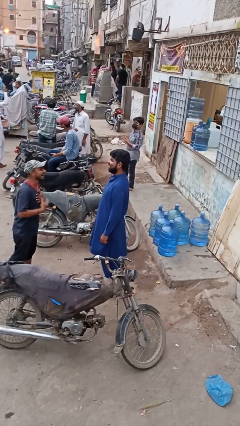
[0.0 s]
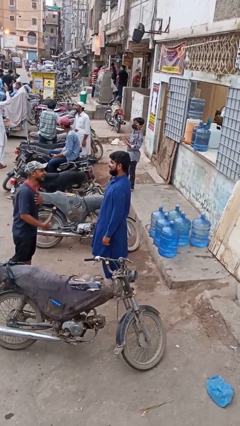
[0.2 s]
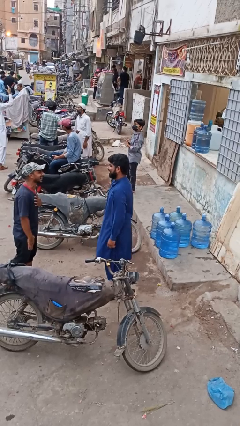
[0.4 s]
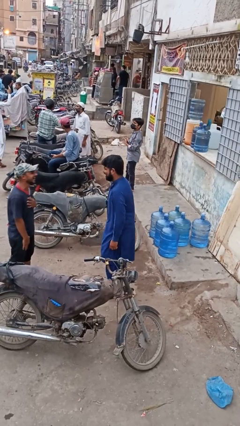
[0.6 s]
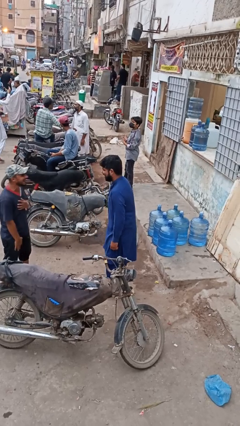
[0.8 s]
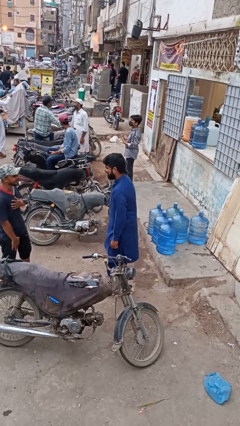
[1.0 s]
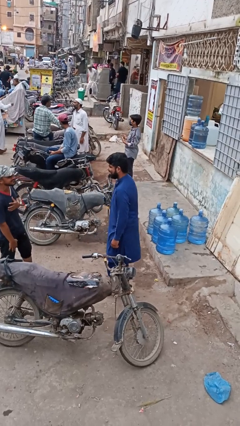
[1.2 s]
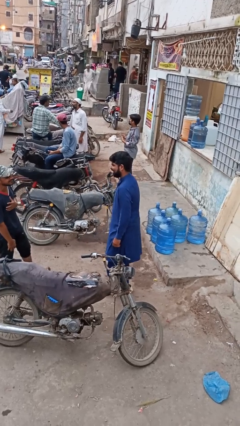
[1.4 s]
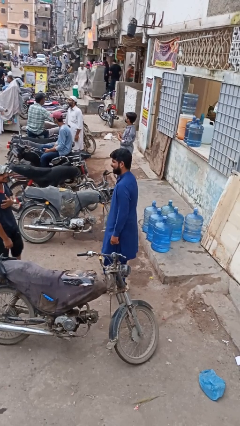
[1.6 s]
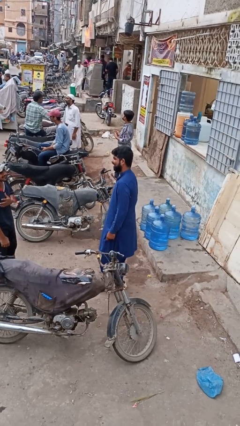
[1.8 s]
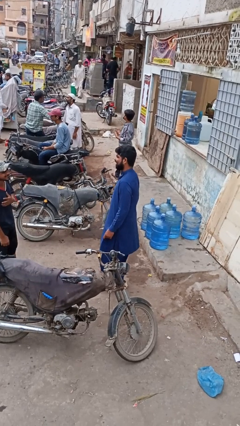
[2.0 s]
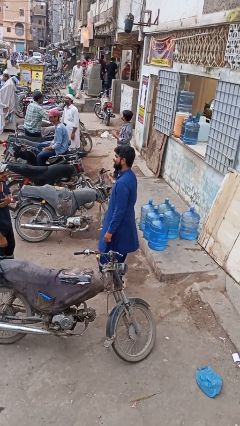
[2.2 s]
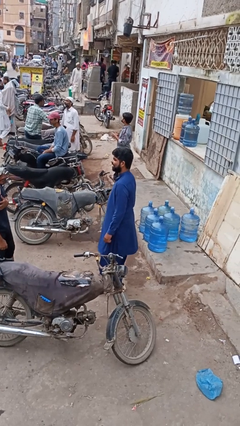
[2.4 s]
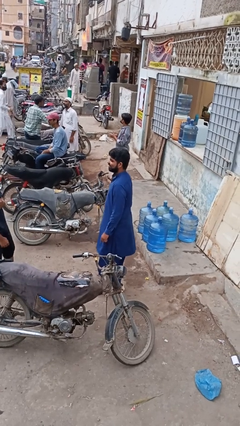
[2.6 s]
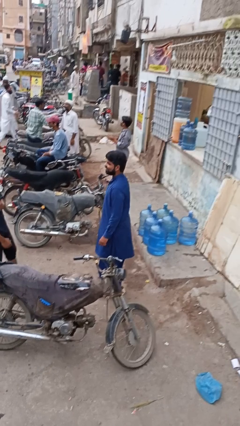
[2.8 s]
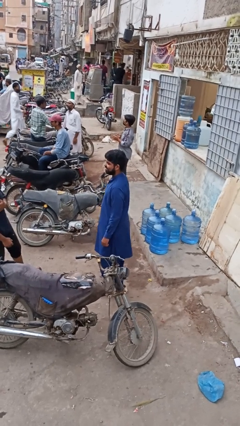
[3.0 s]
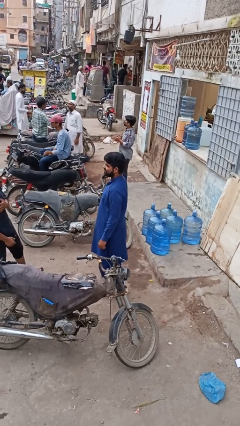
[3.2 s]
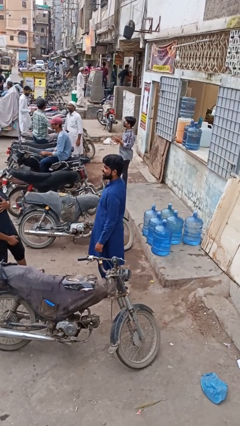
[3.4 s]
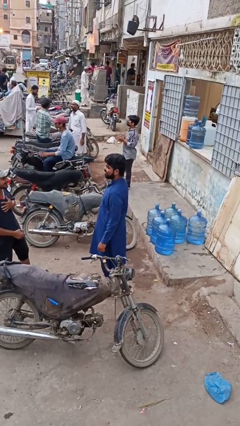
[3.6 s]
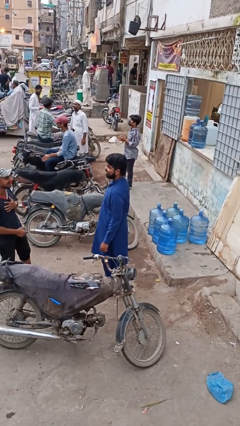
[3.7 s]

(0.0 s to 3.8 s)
person laughs with person

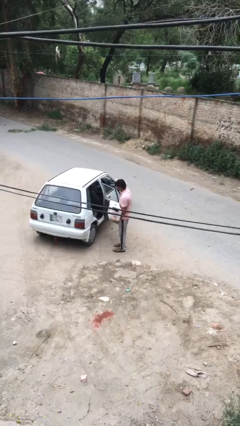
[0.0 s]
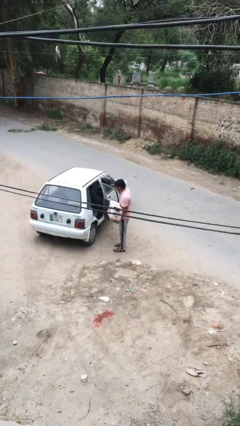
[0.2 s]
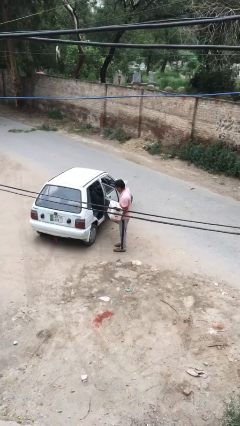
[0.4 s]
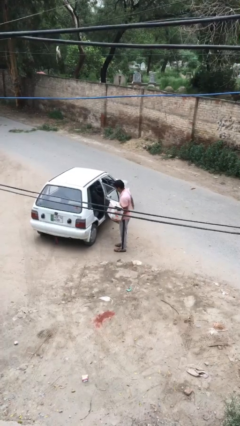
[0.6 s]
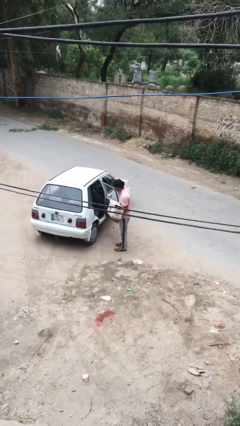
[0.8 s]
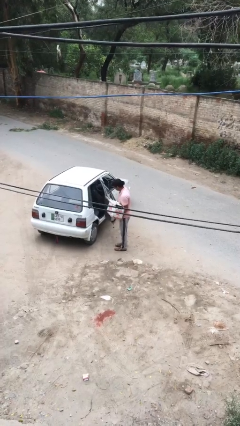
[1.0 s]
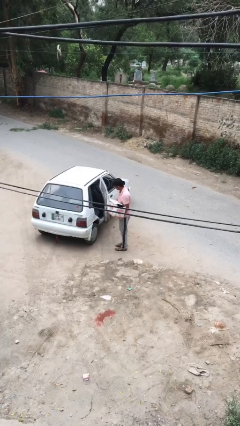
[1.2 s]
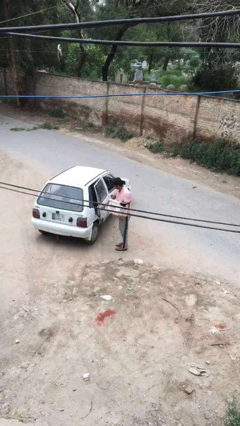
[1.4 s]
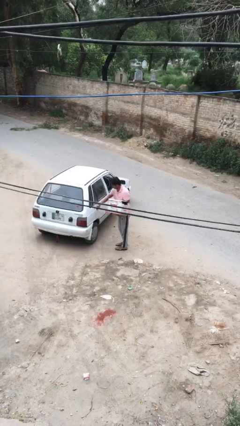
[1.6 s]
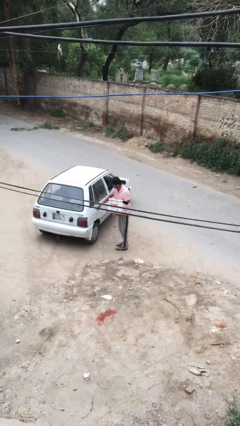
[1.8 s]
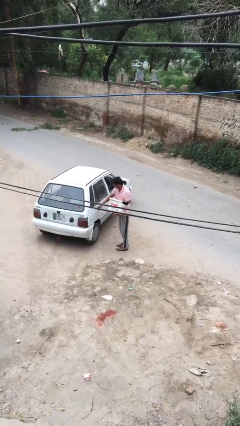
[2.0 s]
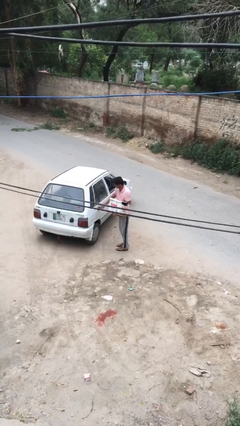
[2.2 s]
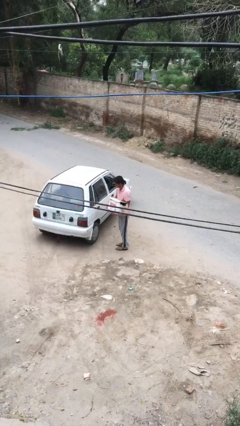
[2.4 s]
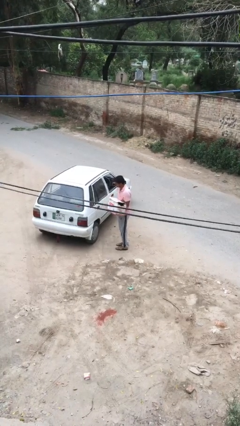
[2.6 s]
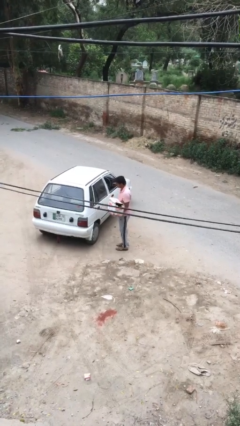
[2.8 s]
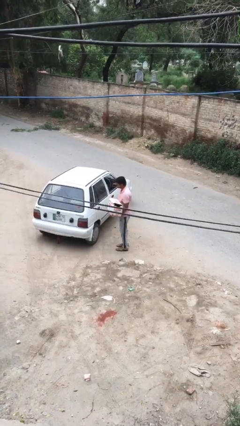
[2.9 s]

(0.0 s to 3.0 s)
person closes car door

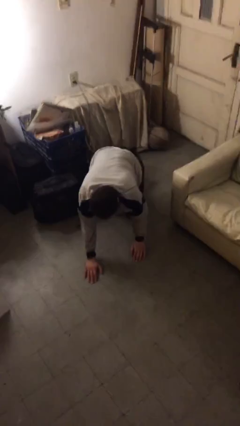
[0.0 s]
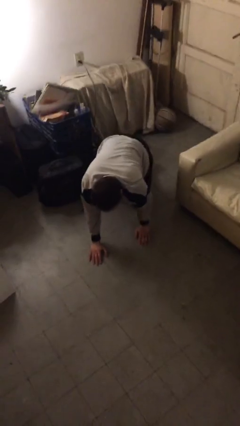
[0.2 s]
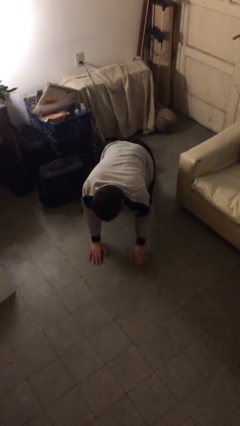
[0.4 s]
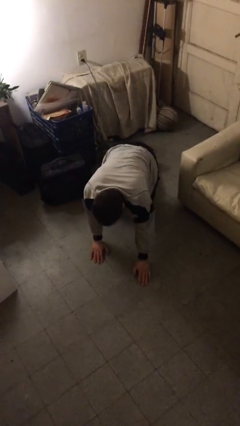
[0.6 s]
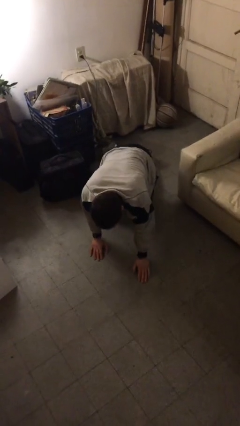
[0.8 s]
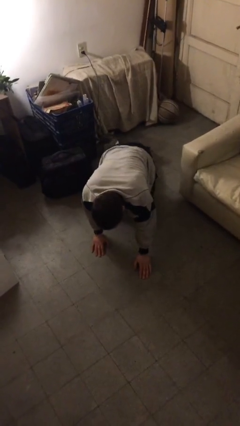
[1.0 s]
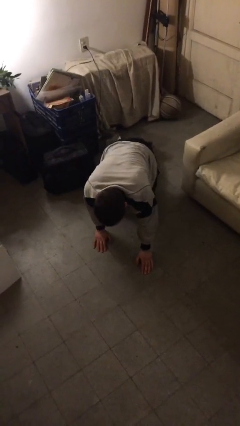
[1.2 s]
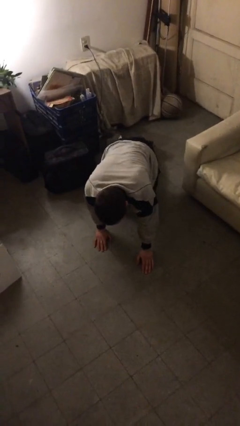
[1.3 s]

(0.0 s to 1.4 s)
person crawls

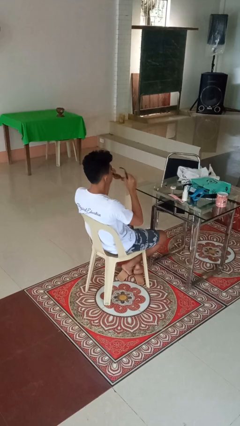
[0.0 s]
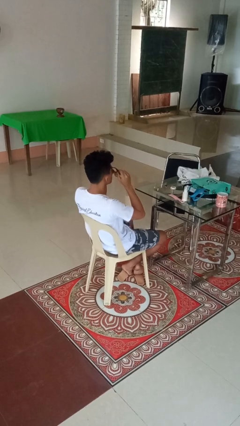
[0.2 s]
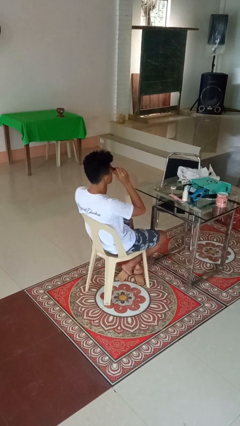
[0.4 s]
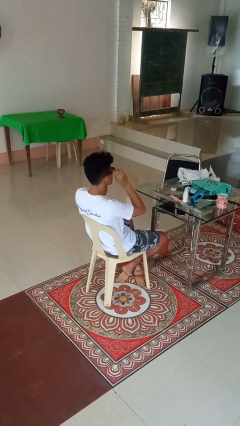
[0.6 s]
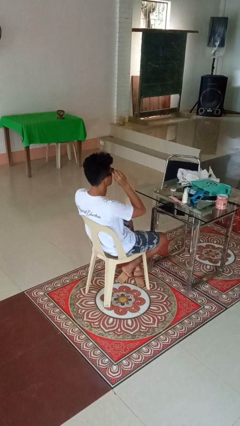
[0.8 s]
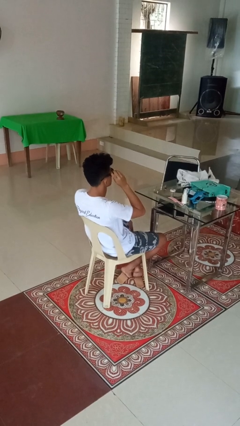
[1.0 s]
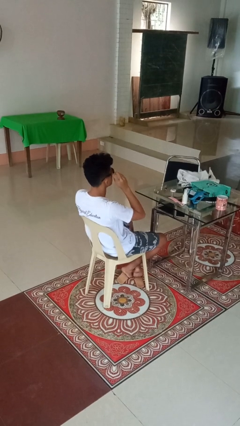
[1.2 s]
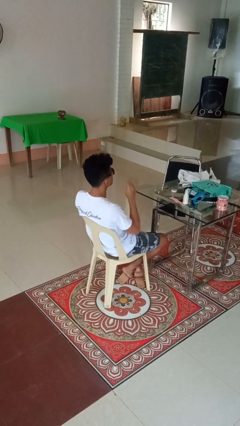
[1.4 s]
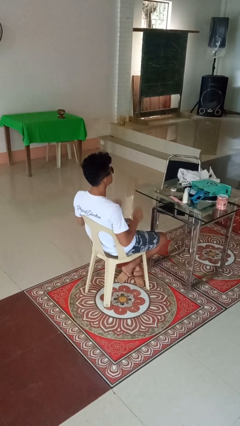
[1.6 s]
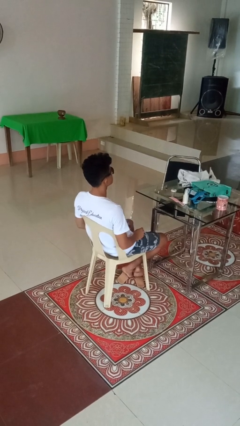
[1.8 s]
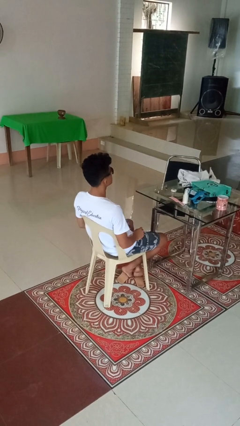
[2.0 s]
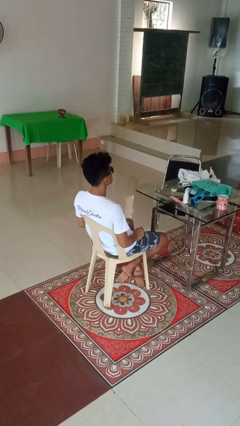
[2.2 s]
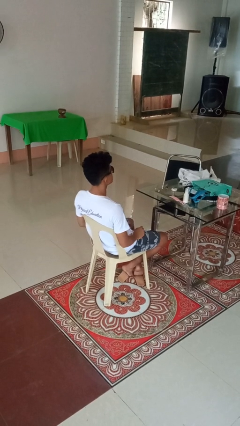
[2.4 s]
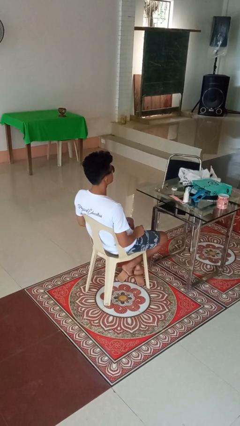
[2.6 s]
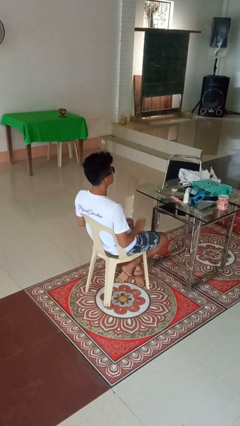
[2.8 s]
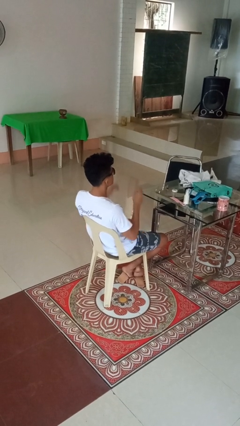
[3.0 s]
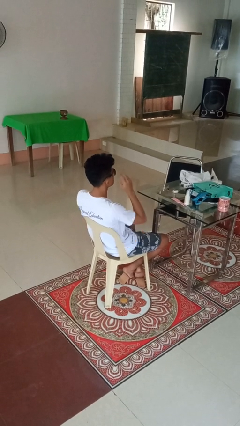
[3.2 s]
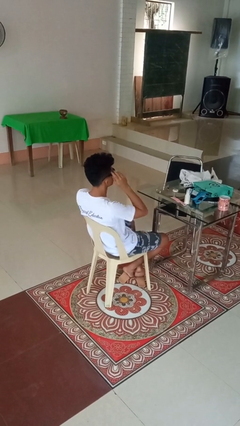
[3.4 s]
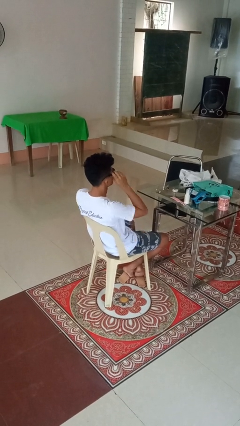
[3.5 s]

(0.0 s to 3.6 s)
person puts on sunglasses

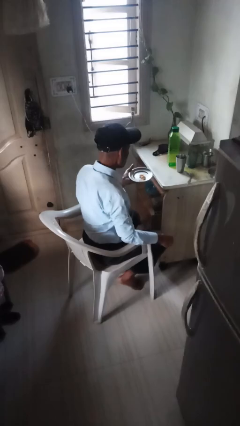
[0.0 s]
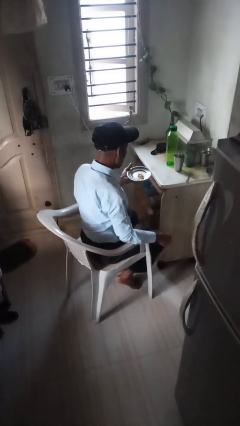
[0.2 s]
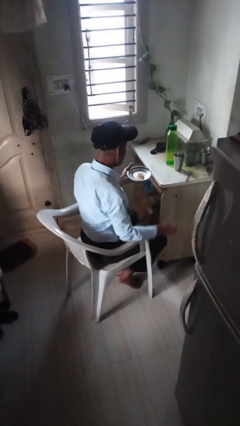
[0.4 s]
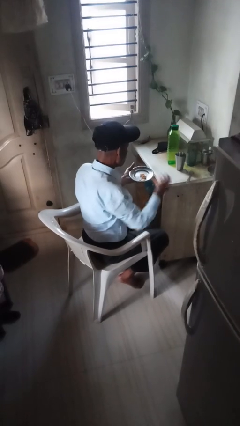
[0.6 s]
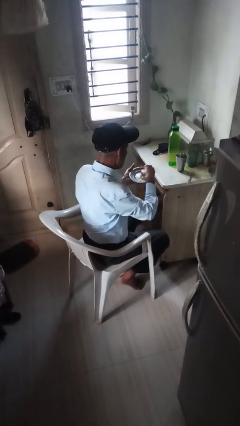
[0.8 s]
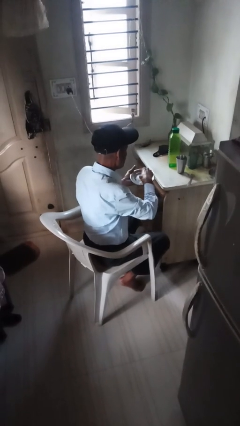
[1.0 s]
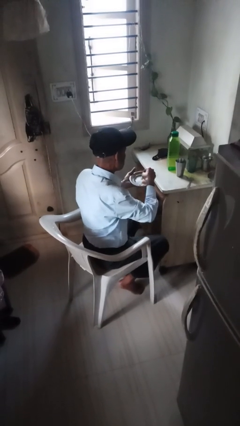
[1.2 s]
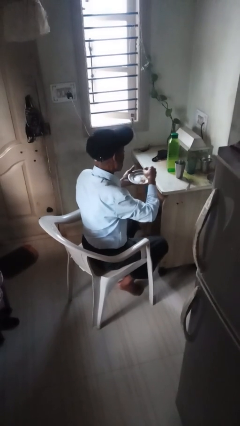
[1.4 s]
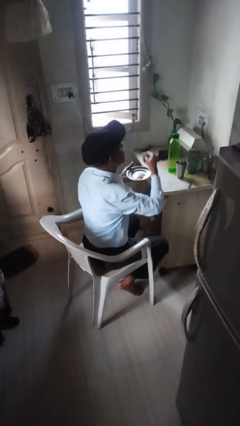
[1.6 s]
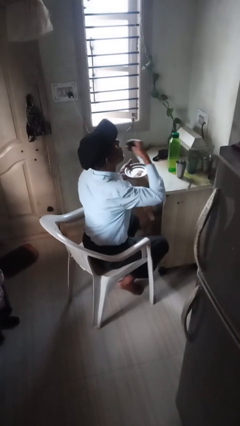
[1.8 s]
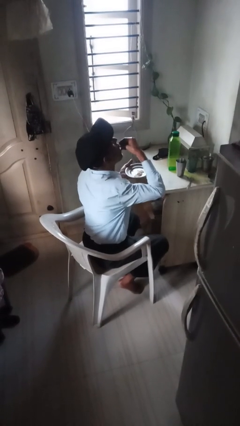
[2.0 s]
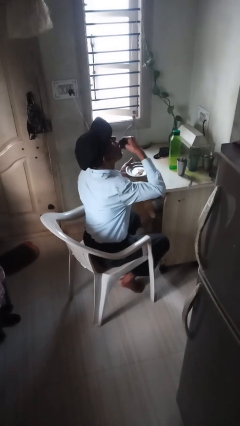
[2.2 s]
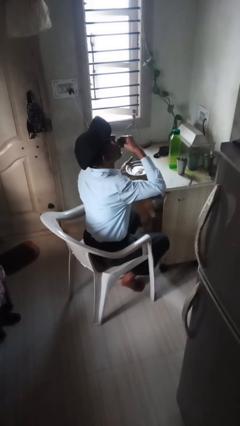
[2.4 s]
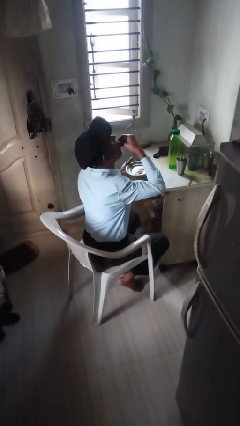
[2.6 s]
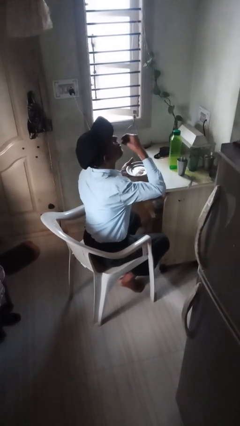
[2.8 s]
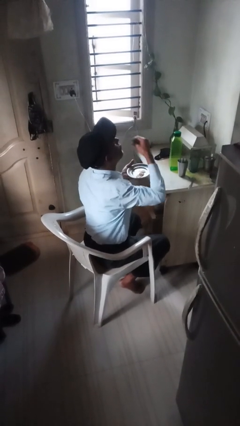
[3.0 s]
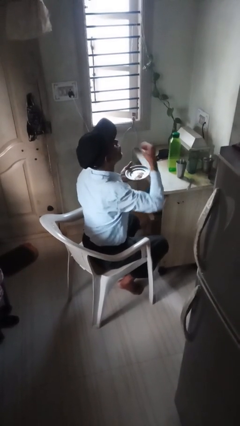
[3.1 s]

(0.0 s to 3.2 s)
person eats with hands

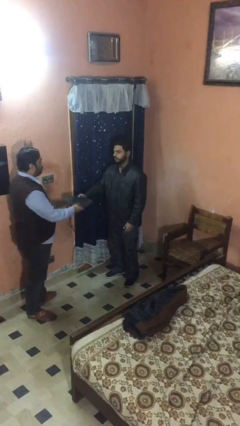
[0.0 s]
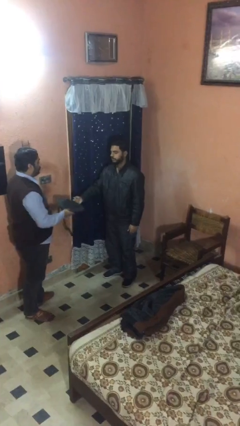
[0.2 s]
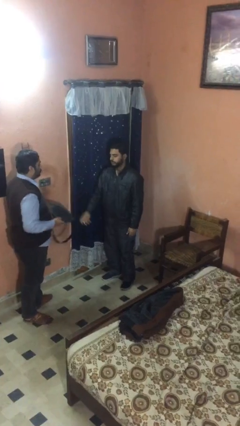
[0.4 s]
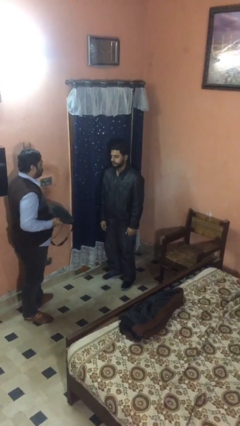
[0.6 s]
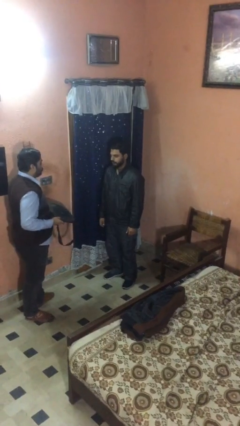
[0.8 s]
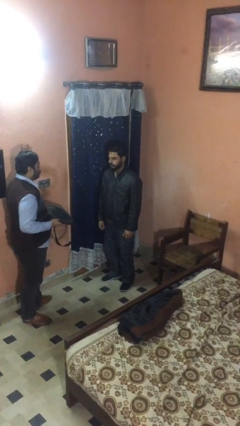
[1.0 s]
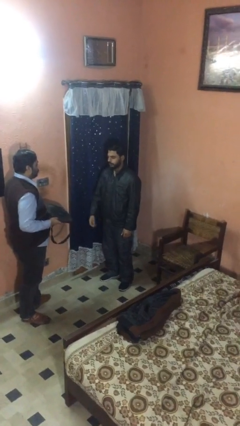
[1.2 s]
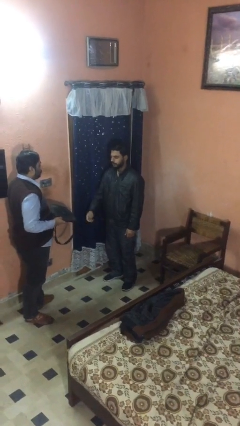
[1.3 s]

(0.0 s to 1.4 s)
person transfers object to person

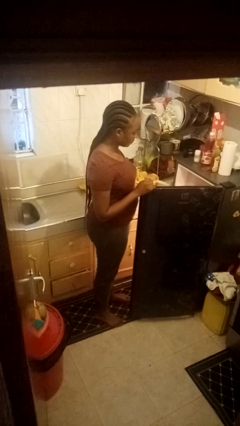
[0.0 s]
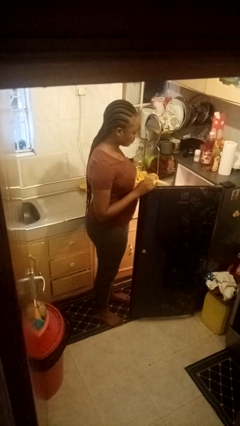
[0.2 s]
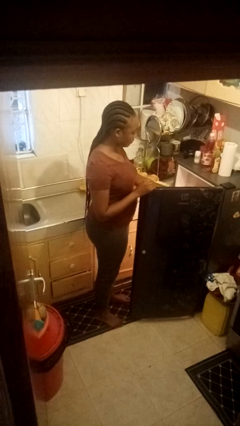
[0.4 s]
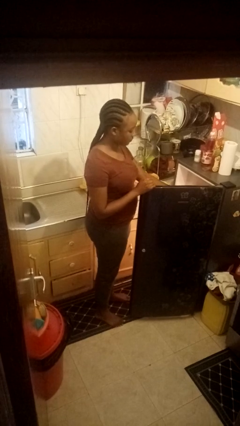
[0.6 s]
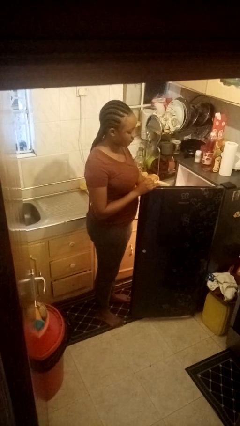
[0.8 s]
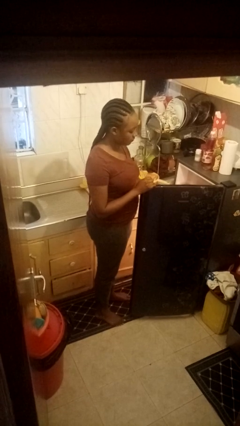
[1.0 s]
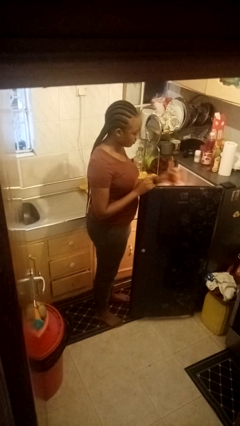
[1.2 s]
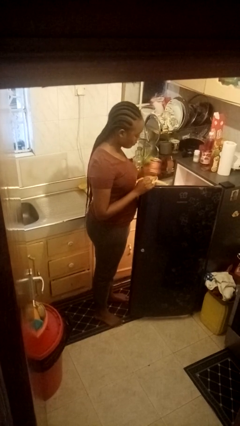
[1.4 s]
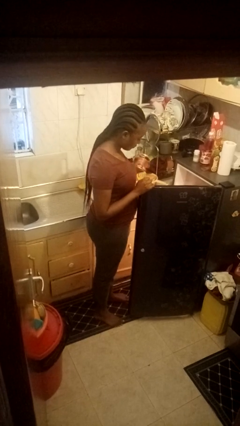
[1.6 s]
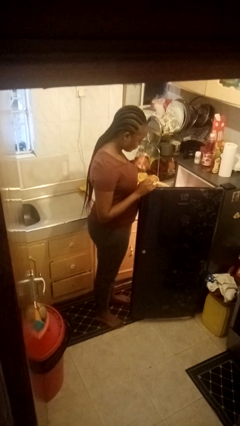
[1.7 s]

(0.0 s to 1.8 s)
person takes object from refrigerator
